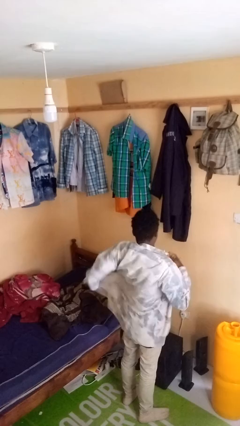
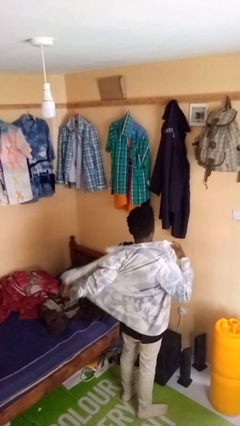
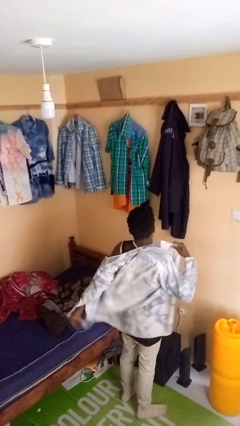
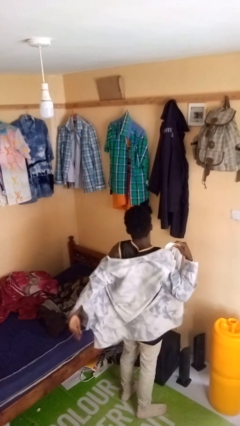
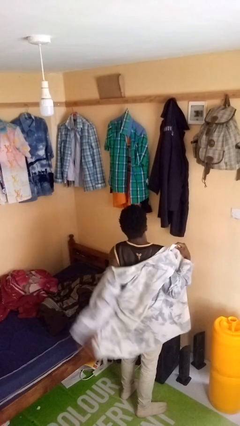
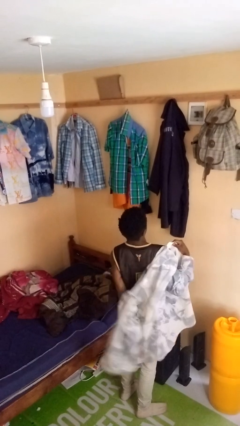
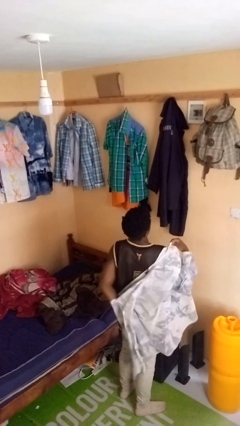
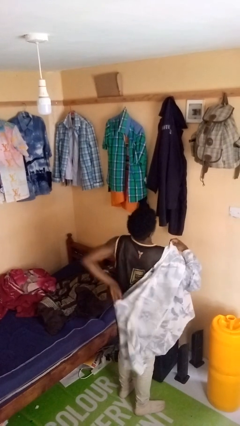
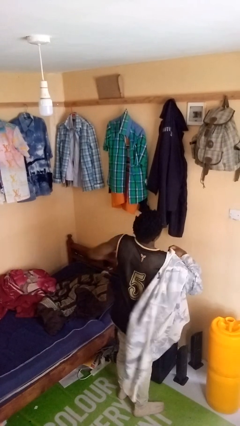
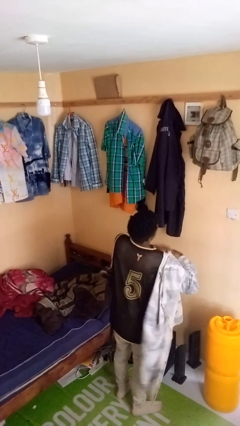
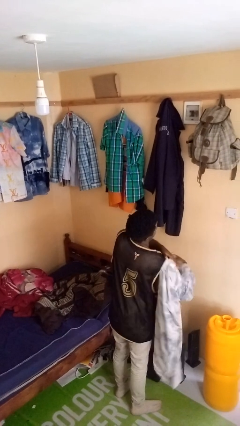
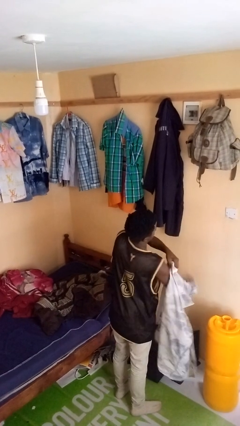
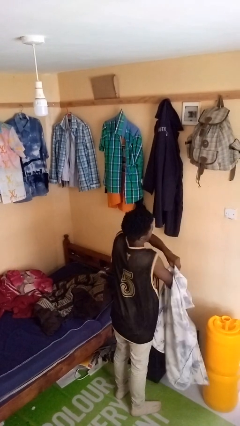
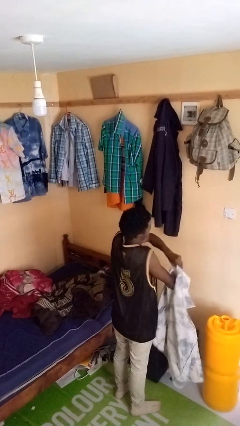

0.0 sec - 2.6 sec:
person takes off shirt

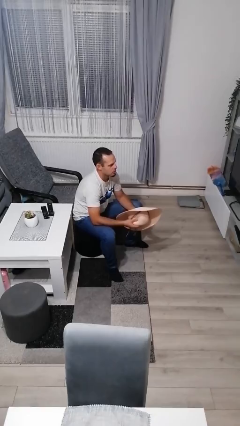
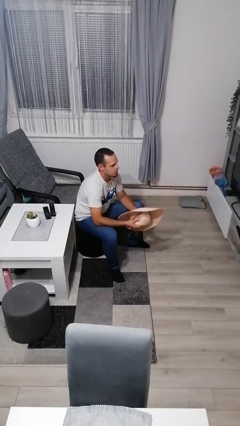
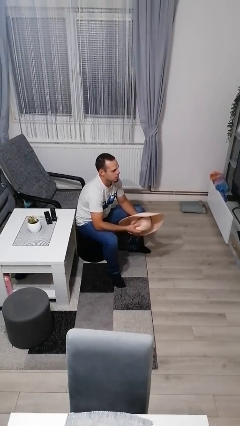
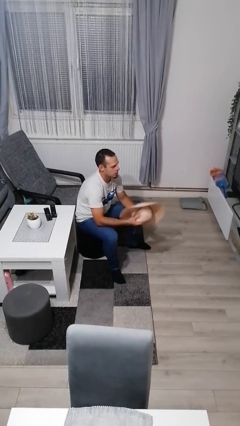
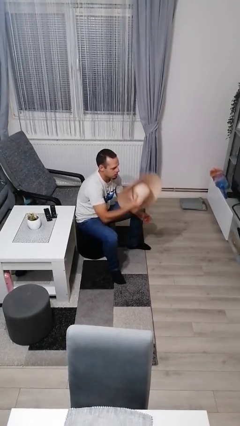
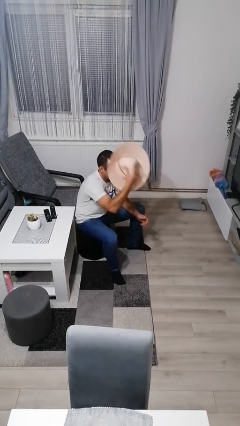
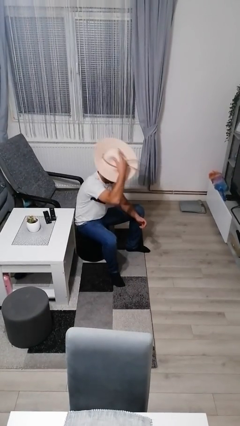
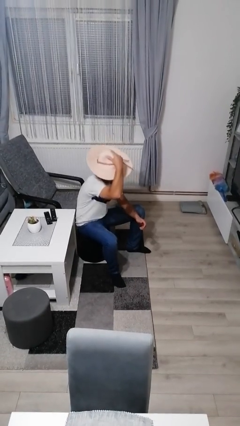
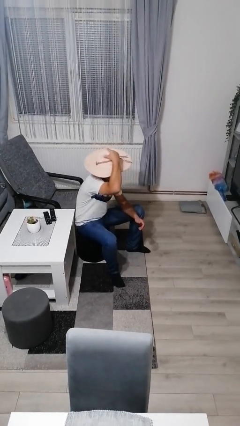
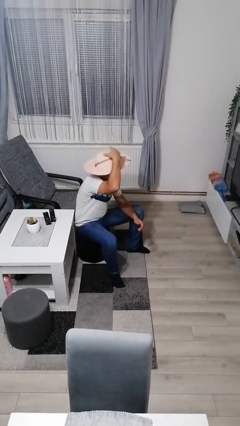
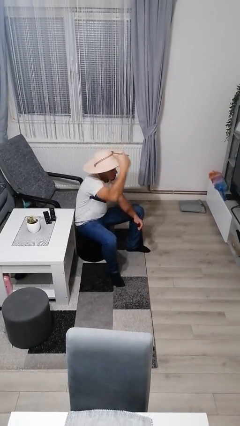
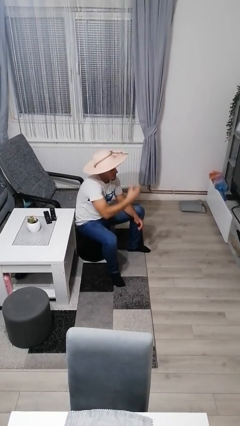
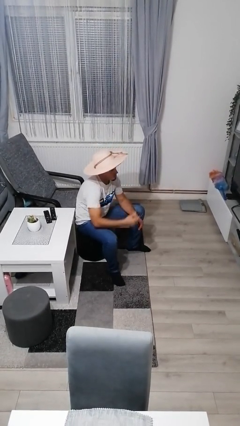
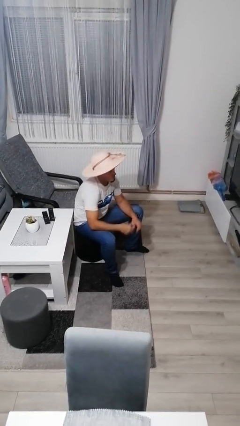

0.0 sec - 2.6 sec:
person puts on hat

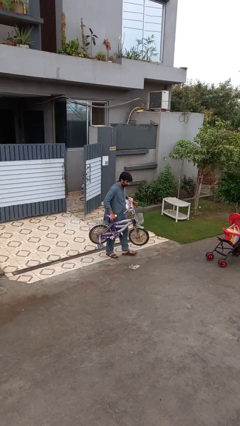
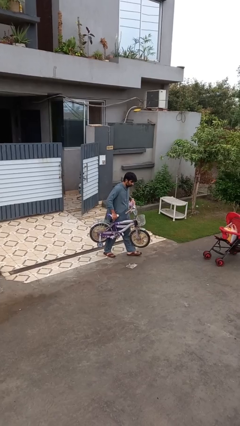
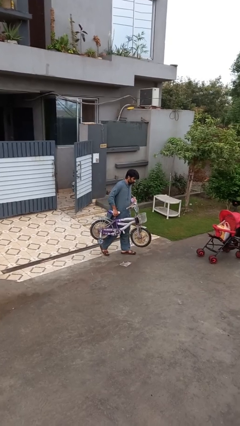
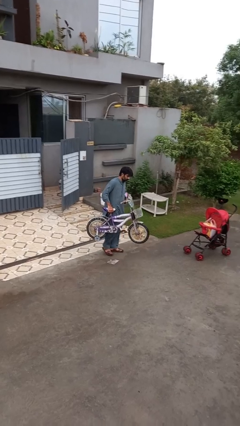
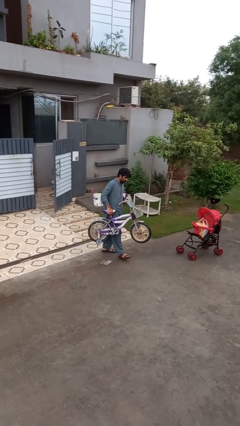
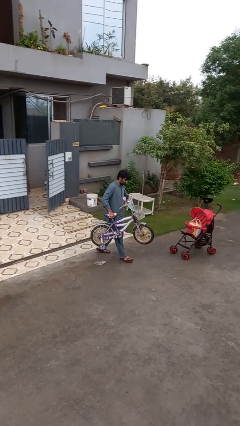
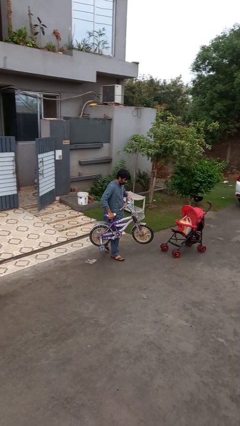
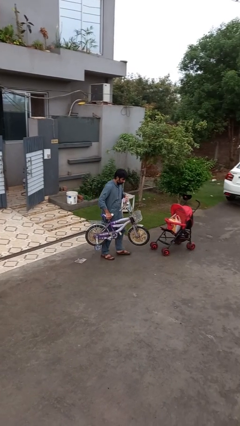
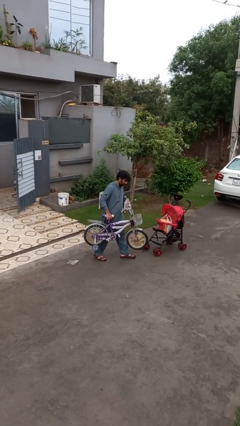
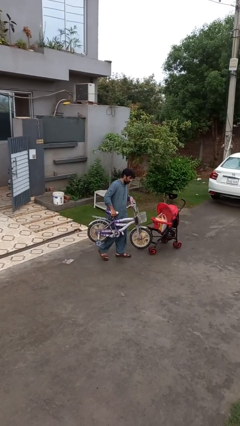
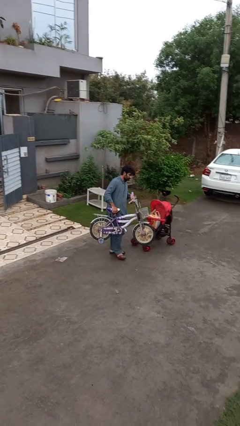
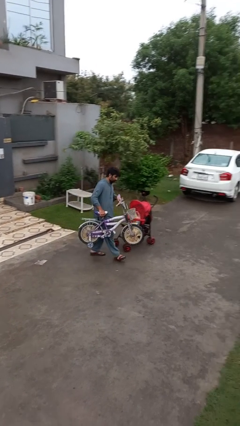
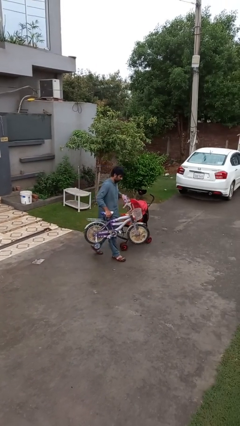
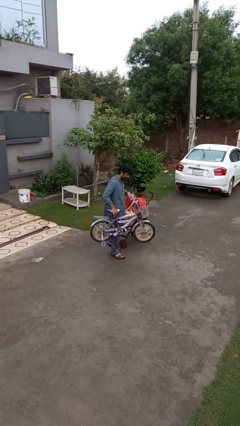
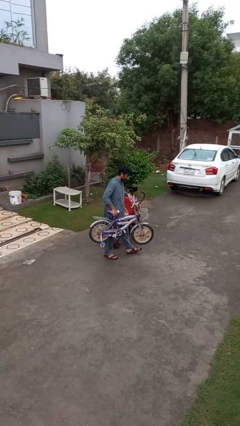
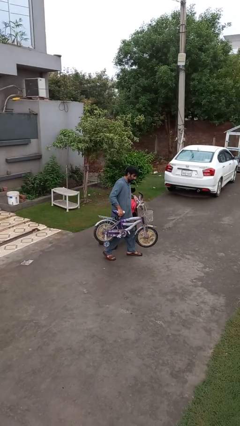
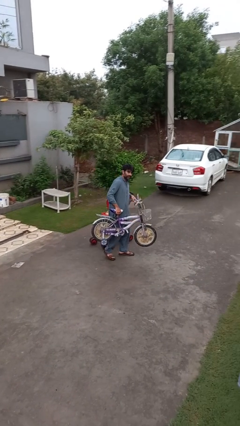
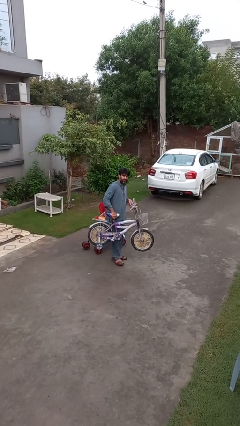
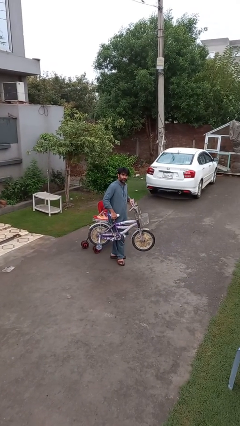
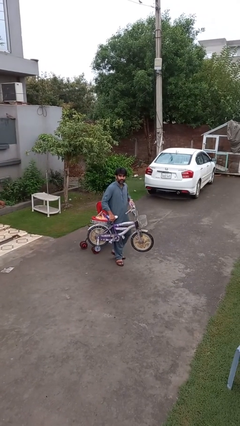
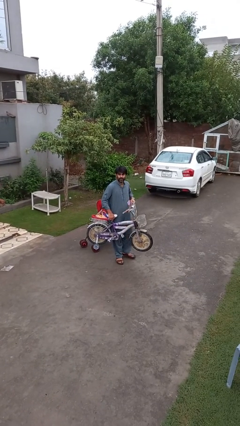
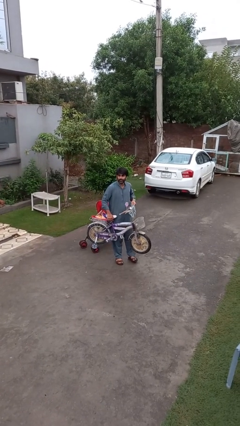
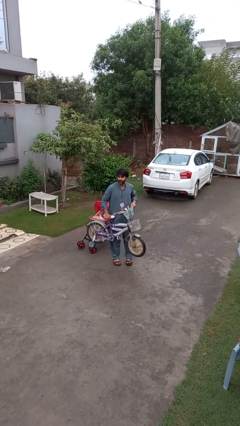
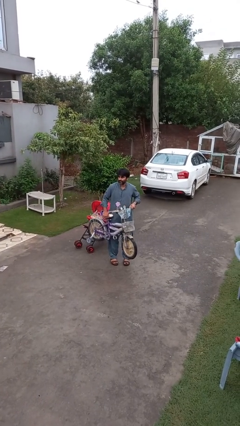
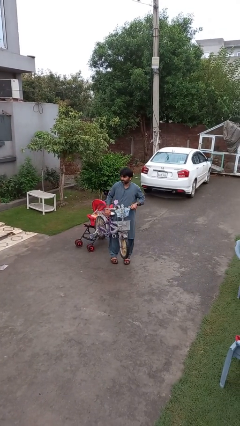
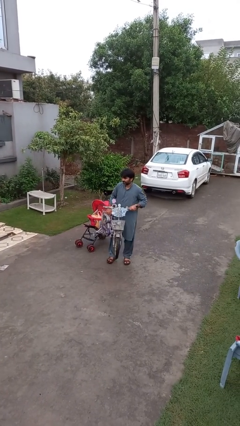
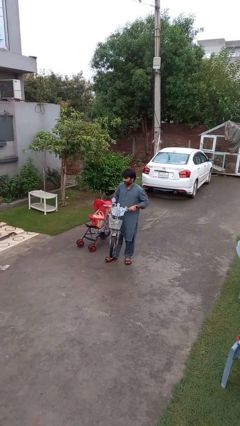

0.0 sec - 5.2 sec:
person carries bicycle

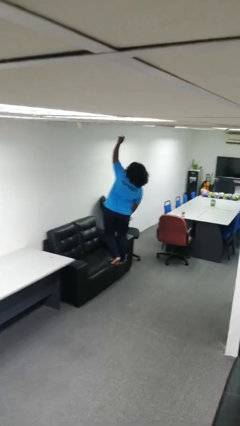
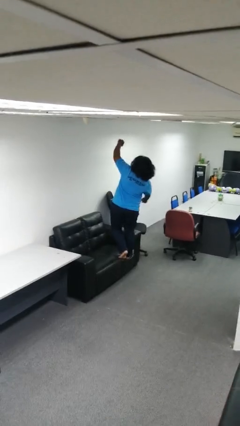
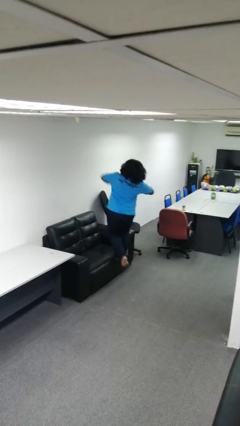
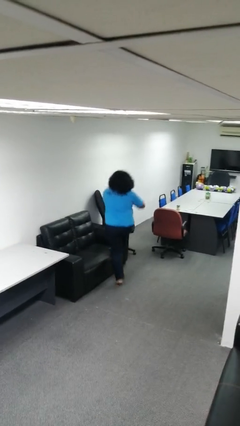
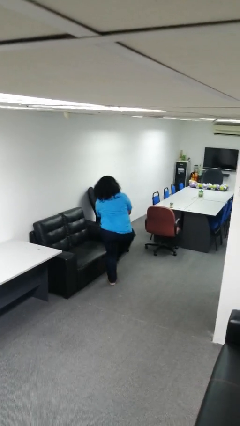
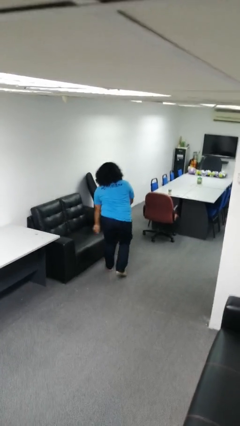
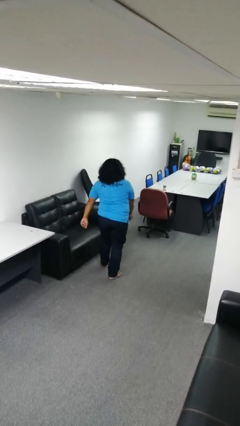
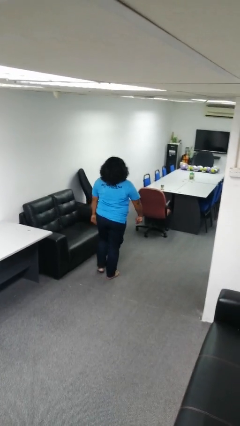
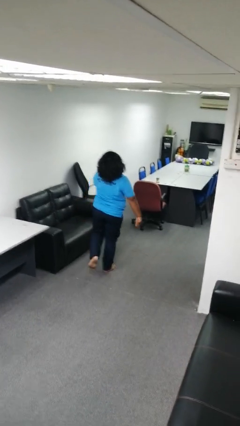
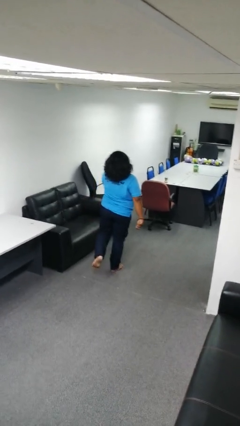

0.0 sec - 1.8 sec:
person climbs off couch

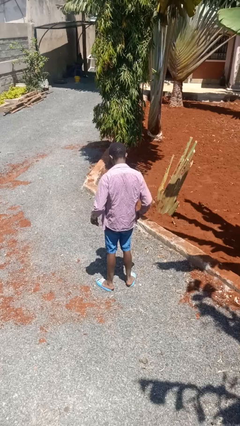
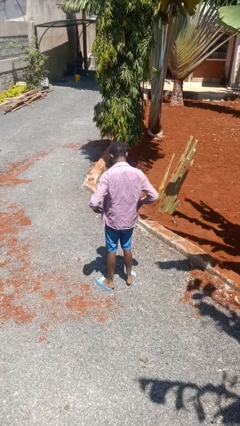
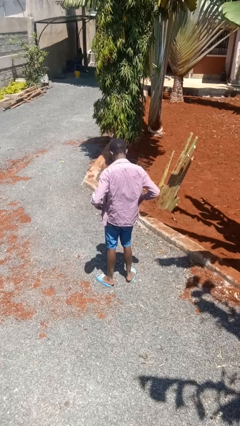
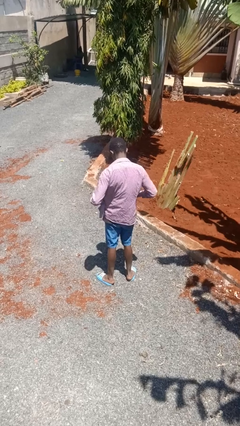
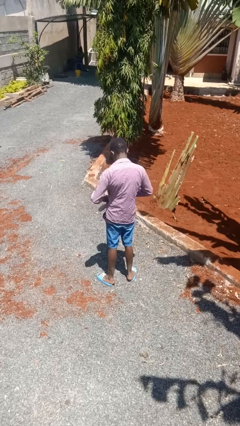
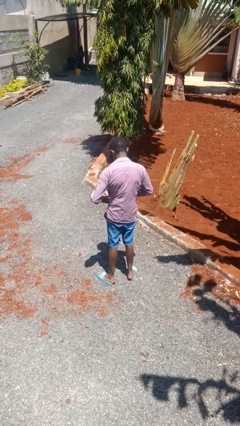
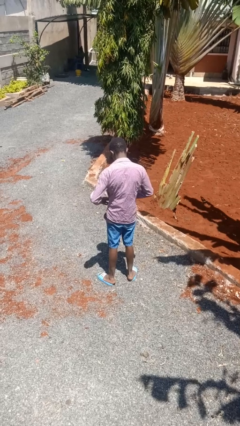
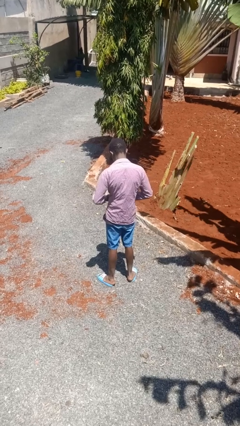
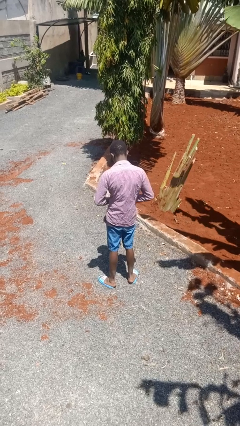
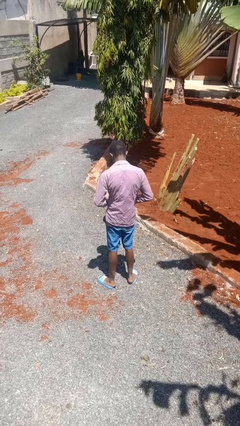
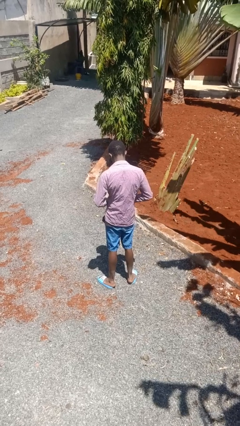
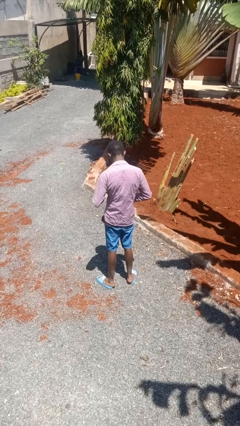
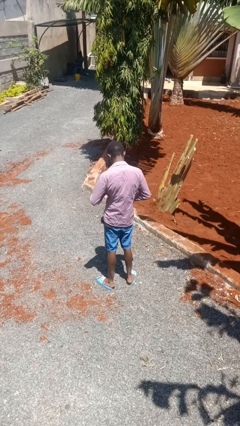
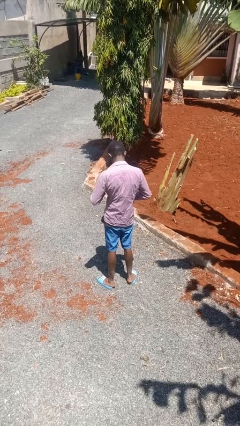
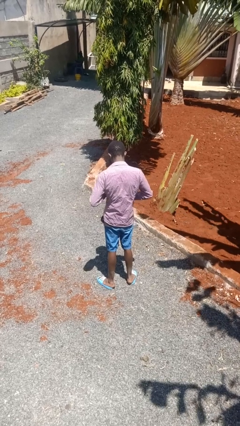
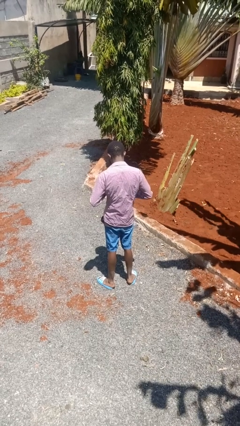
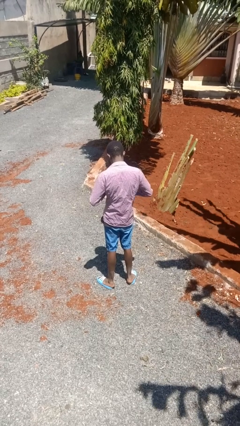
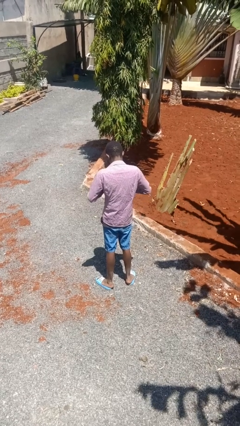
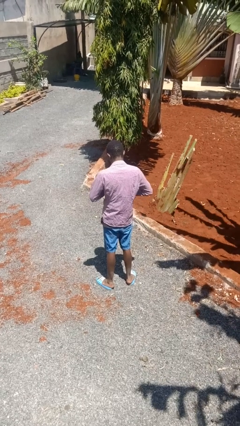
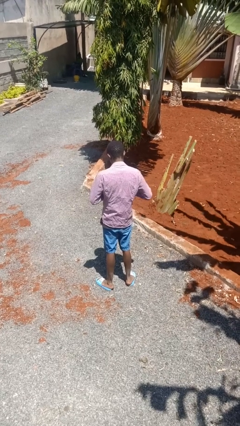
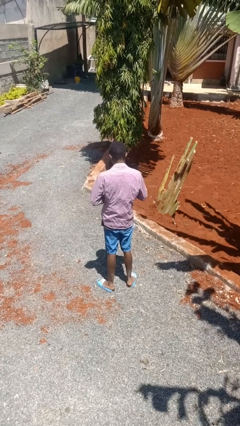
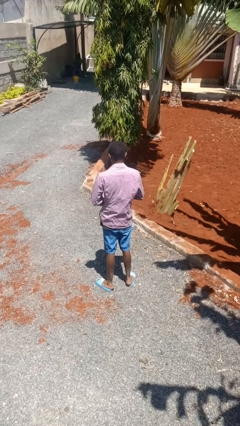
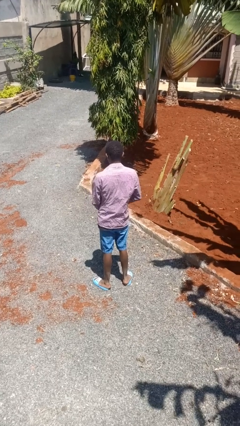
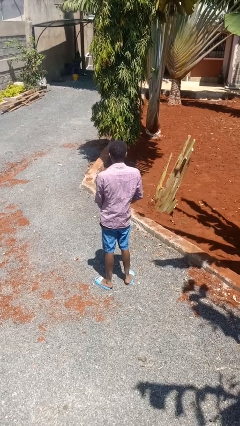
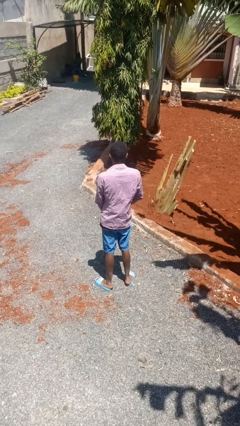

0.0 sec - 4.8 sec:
person buttons shirt

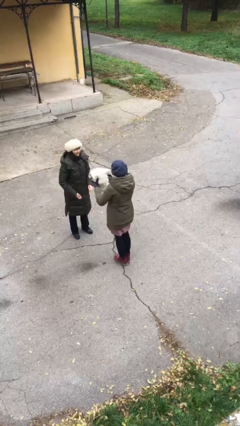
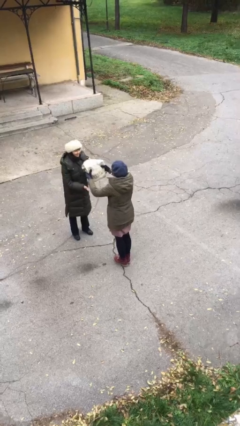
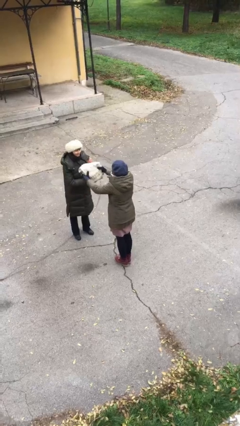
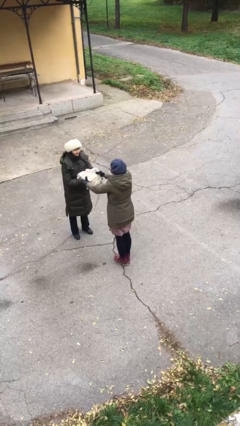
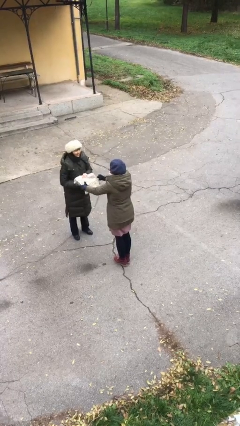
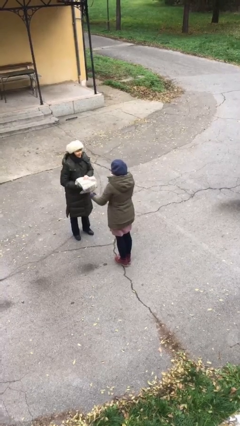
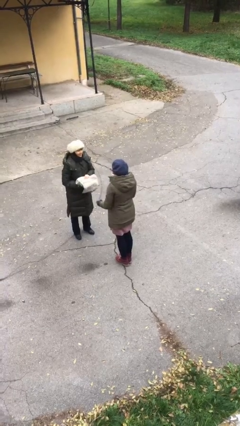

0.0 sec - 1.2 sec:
person transfers object to person
